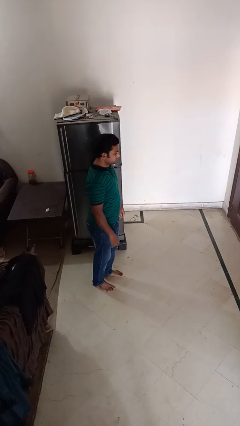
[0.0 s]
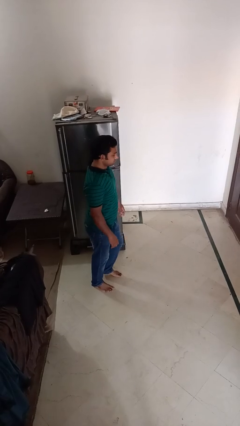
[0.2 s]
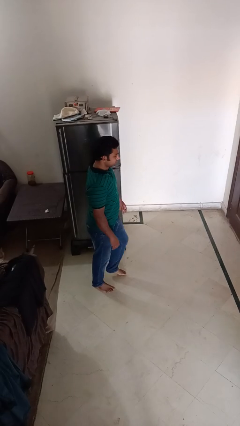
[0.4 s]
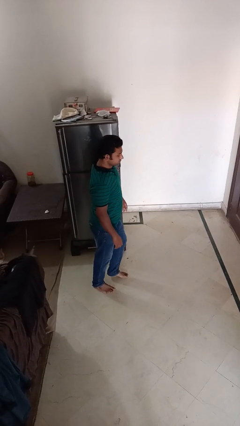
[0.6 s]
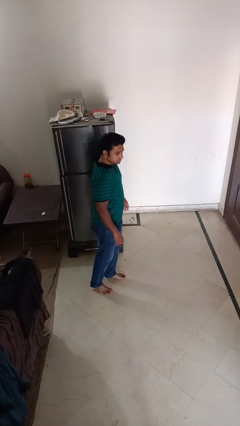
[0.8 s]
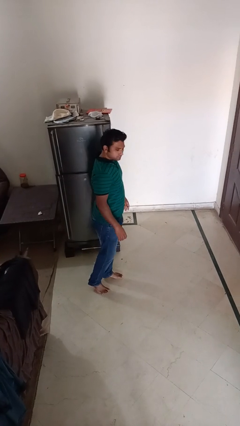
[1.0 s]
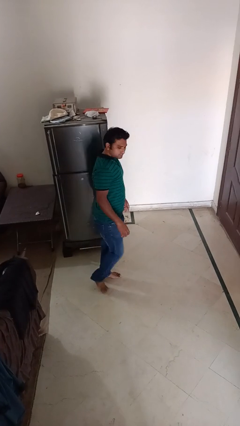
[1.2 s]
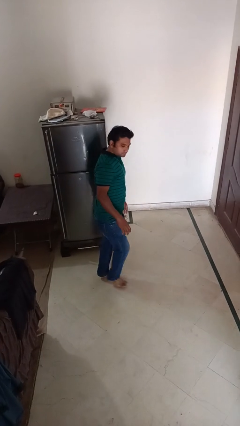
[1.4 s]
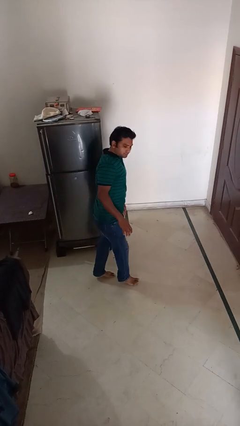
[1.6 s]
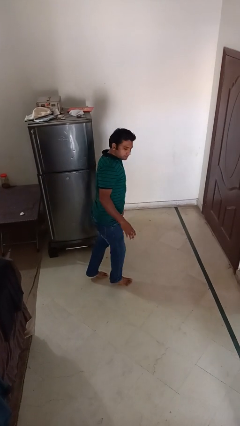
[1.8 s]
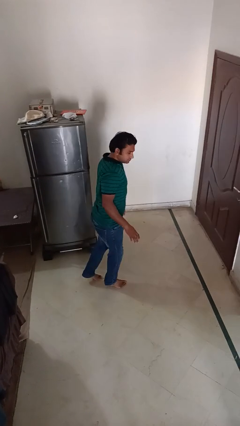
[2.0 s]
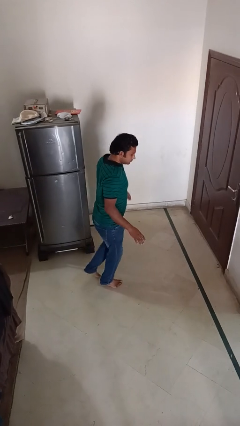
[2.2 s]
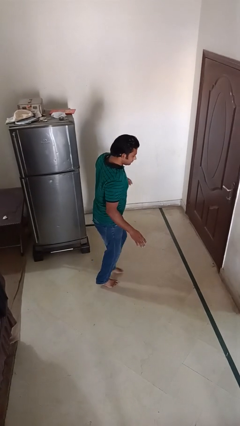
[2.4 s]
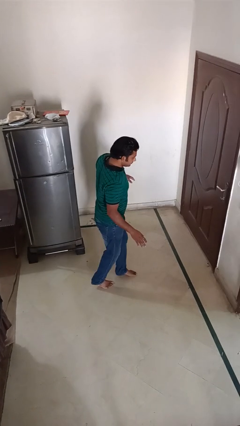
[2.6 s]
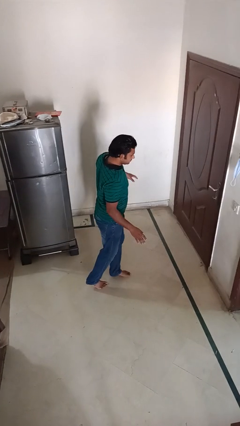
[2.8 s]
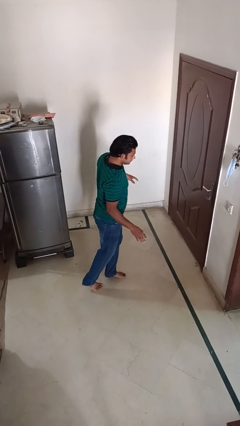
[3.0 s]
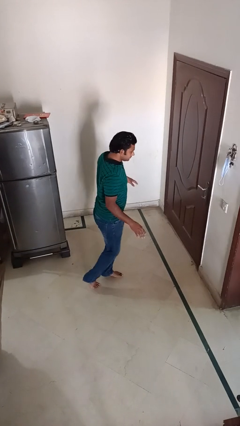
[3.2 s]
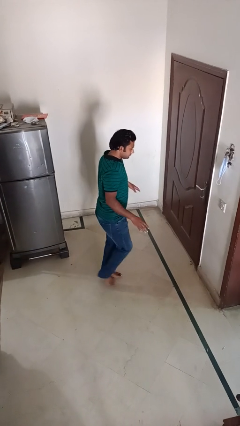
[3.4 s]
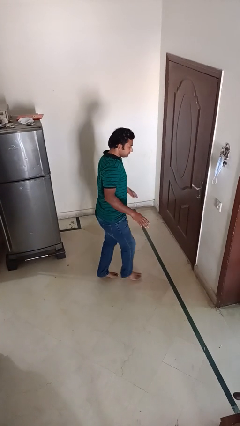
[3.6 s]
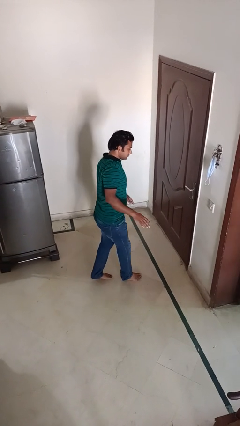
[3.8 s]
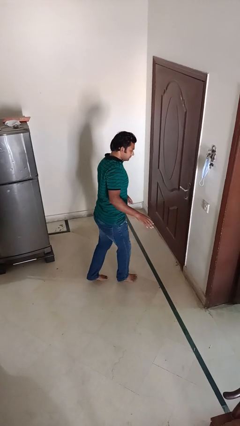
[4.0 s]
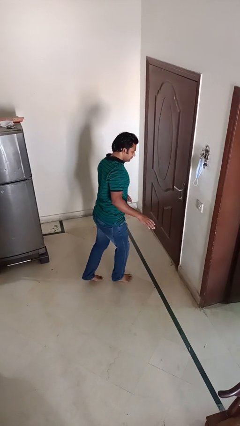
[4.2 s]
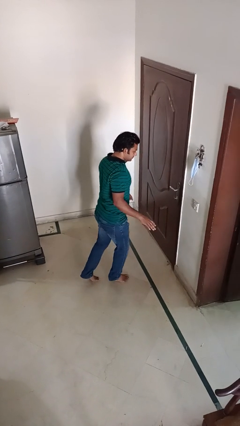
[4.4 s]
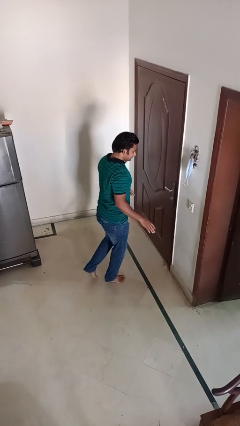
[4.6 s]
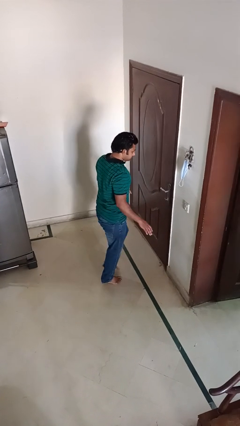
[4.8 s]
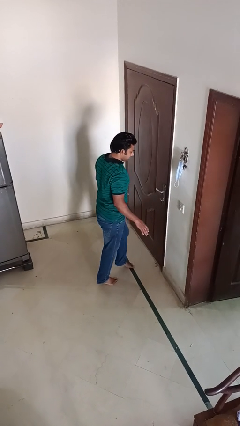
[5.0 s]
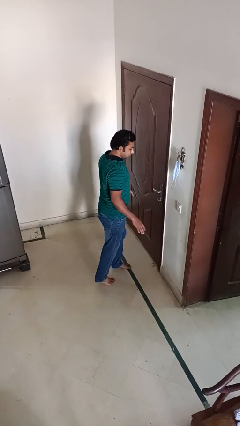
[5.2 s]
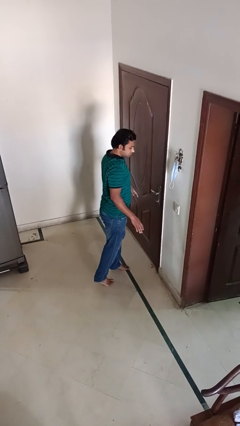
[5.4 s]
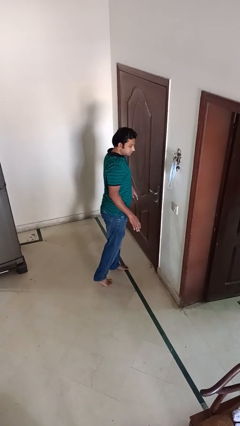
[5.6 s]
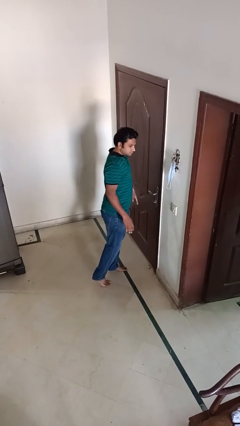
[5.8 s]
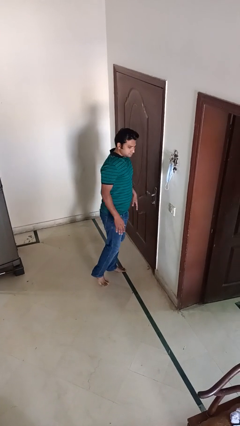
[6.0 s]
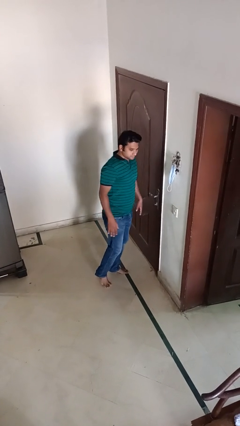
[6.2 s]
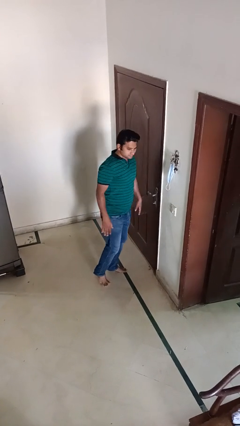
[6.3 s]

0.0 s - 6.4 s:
person walks tiptoe

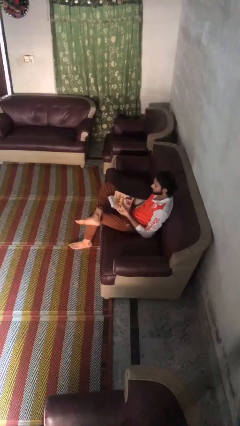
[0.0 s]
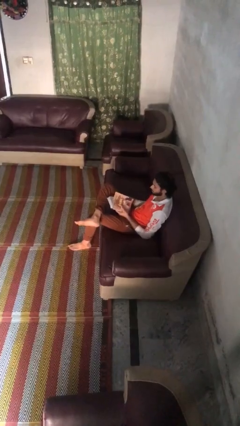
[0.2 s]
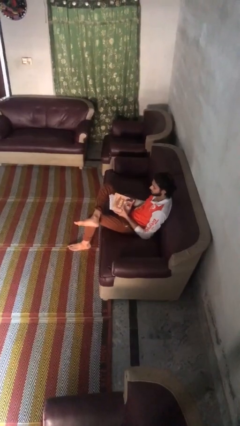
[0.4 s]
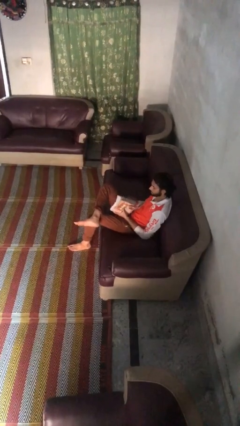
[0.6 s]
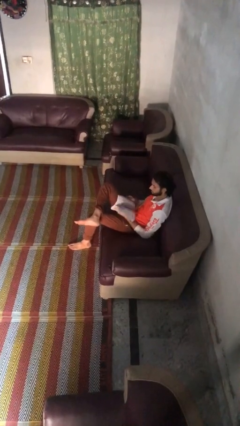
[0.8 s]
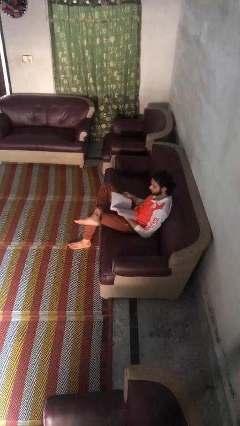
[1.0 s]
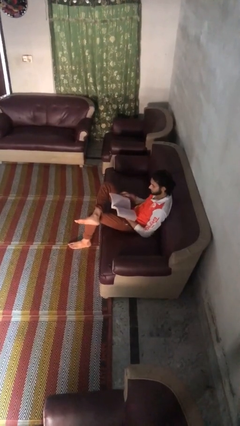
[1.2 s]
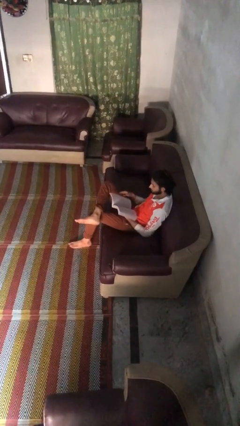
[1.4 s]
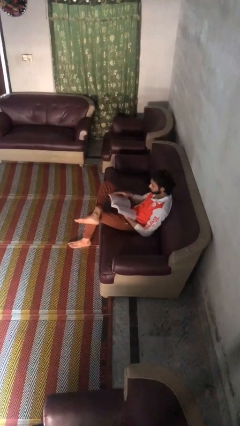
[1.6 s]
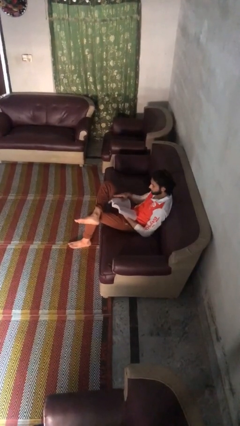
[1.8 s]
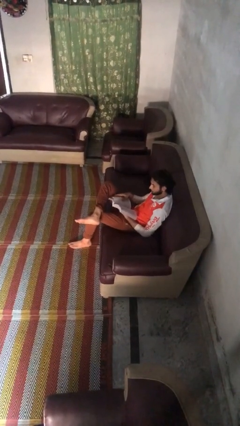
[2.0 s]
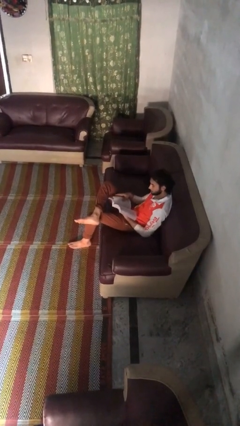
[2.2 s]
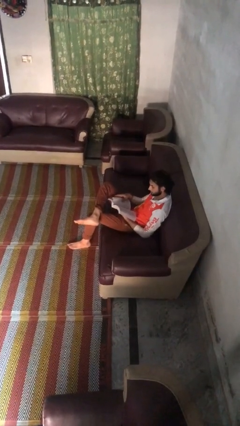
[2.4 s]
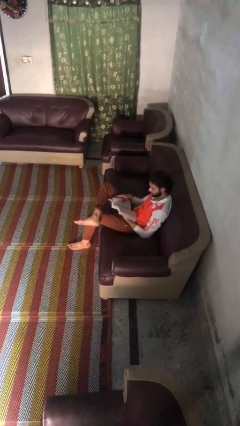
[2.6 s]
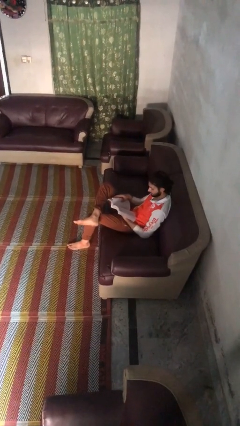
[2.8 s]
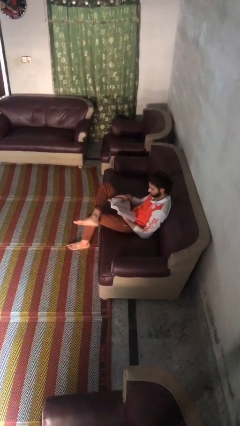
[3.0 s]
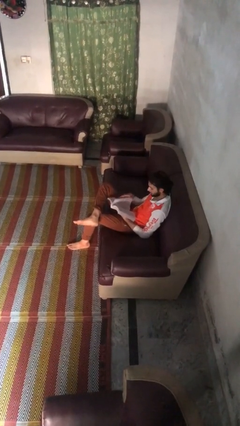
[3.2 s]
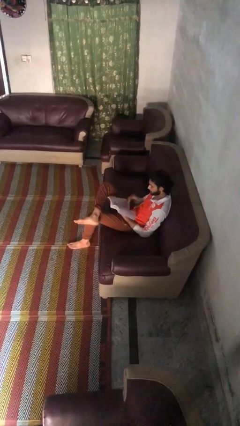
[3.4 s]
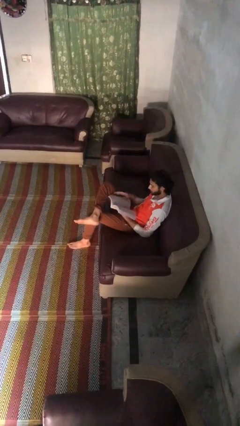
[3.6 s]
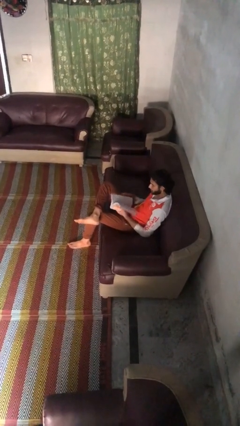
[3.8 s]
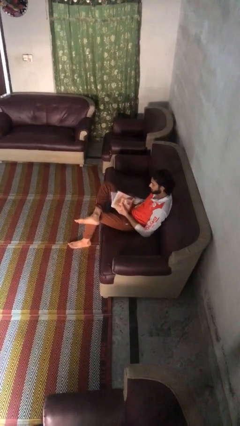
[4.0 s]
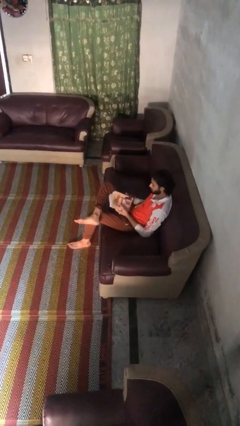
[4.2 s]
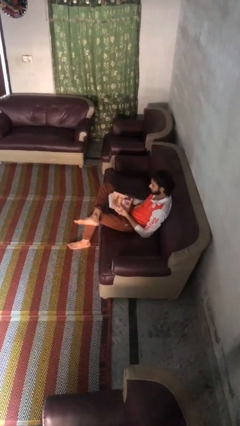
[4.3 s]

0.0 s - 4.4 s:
person reads book

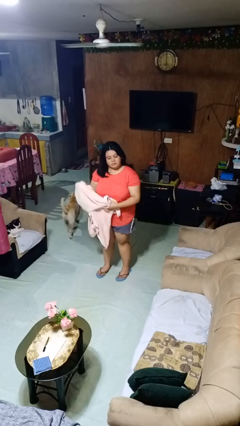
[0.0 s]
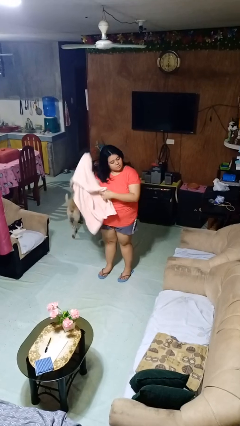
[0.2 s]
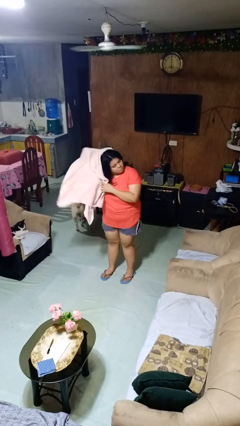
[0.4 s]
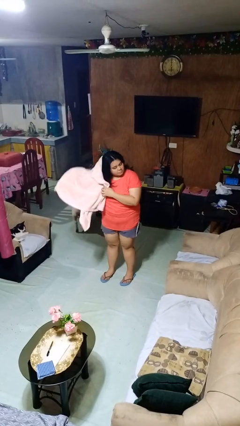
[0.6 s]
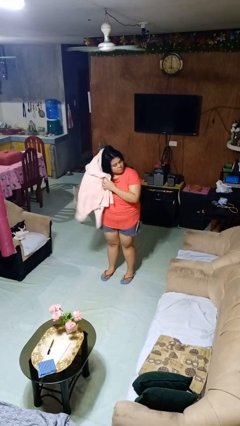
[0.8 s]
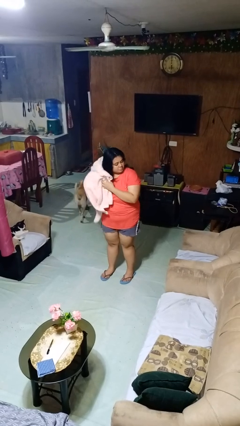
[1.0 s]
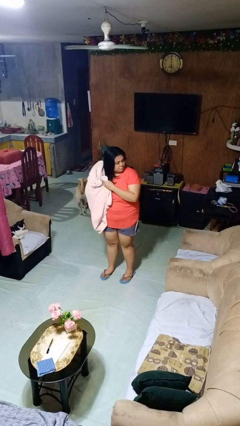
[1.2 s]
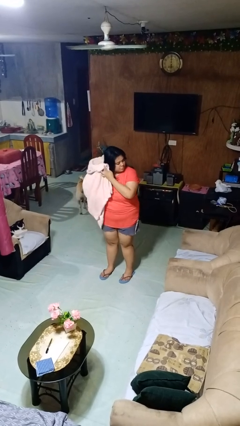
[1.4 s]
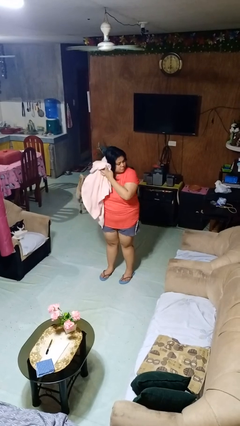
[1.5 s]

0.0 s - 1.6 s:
person dries hair with towel

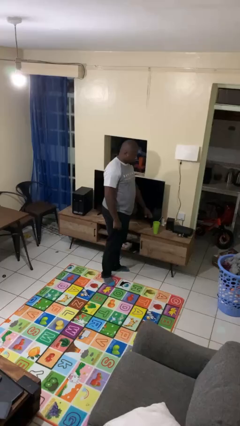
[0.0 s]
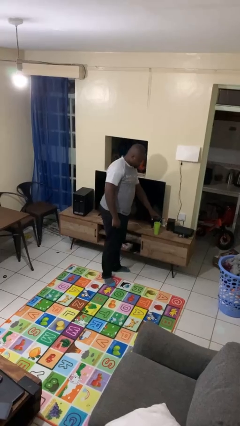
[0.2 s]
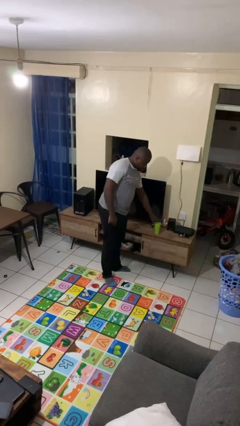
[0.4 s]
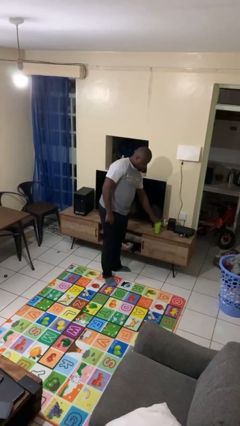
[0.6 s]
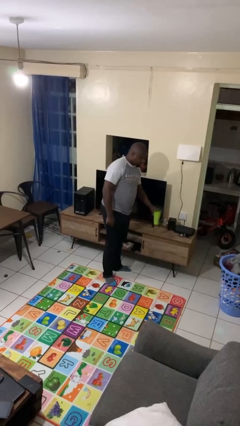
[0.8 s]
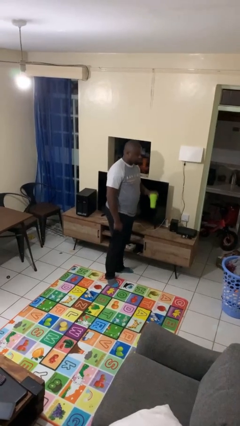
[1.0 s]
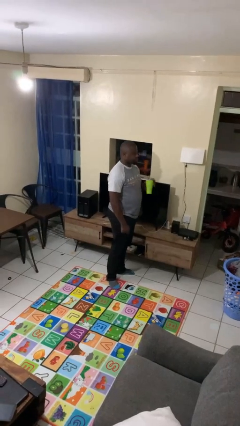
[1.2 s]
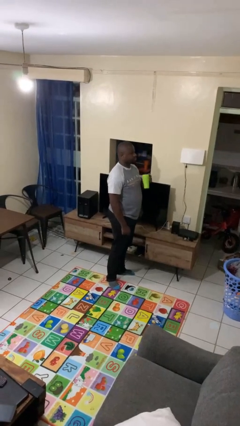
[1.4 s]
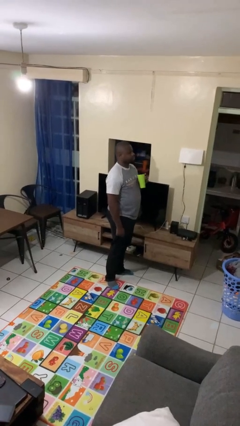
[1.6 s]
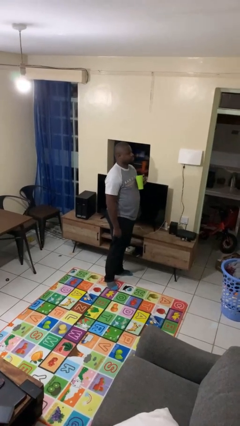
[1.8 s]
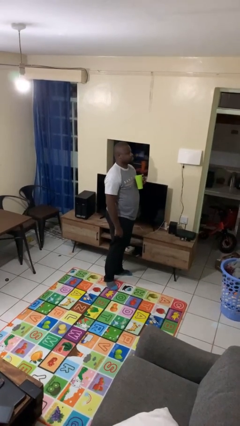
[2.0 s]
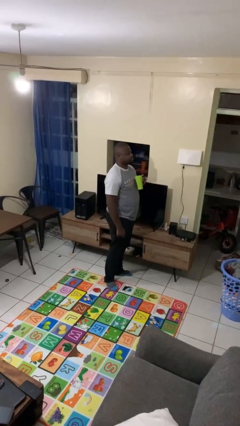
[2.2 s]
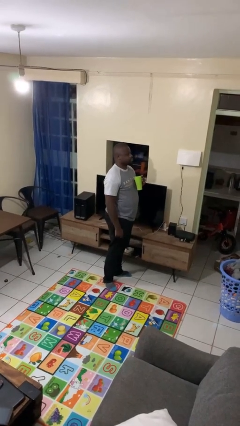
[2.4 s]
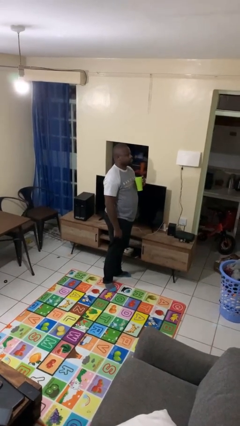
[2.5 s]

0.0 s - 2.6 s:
person picks up object from countertop

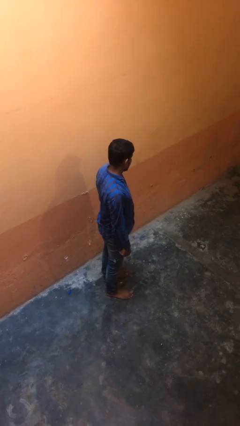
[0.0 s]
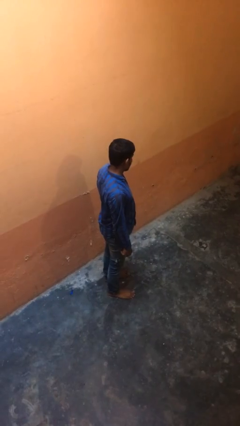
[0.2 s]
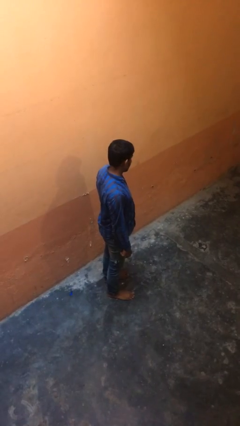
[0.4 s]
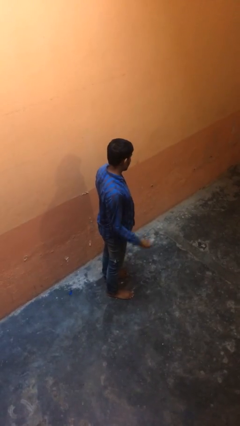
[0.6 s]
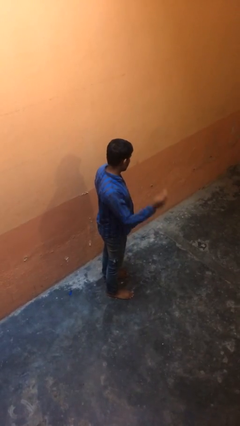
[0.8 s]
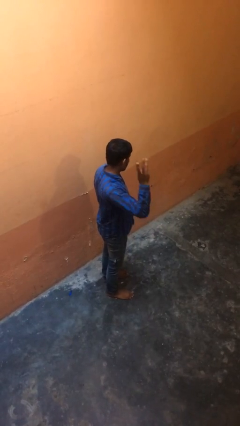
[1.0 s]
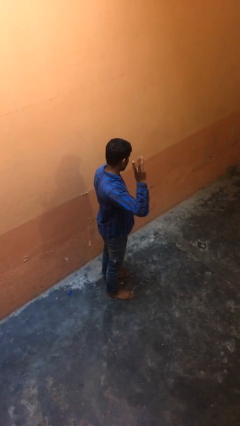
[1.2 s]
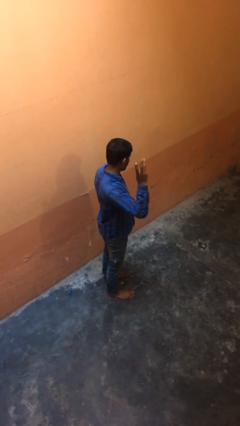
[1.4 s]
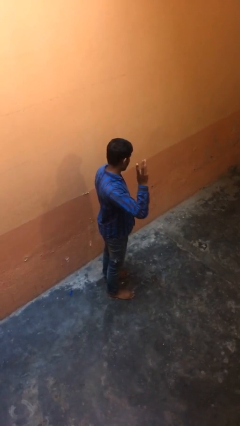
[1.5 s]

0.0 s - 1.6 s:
person gestures number three

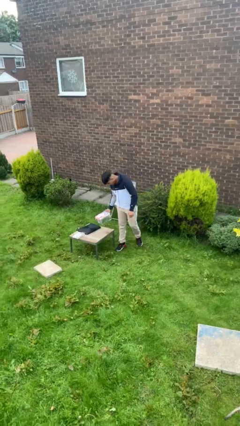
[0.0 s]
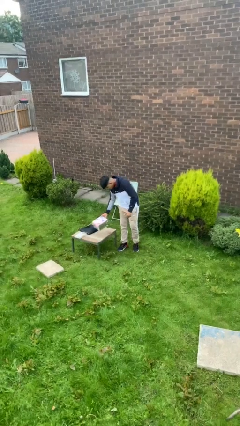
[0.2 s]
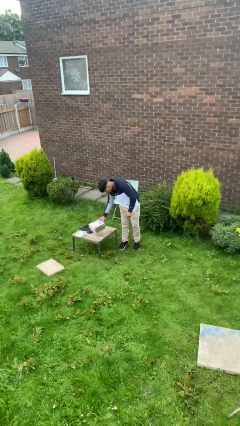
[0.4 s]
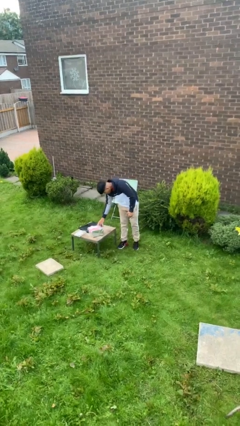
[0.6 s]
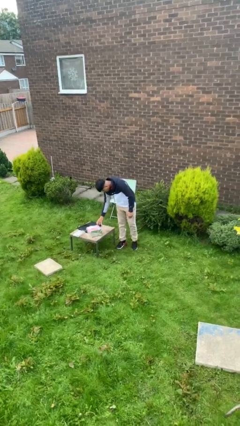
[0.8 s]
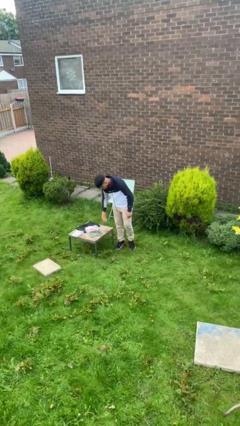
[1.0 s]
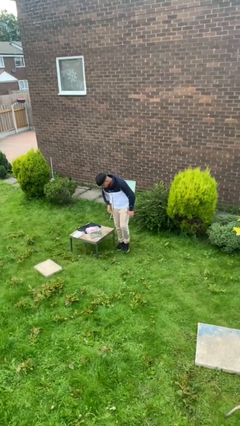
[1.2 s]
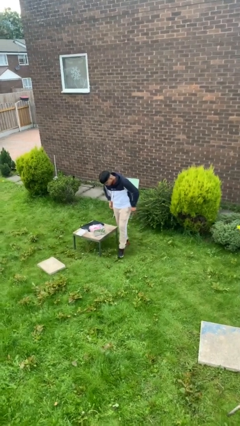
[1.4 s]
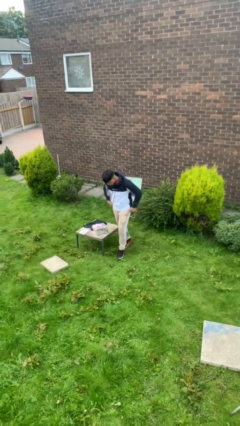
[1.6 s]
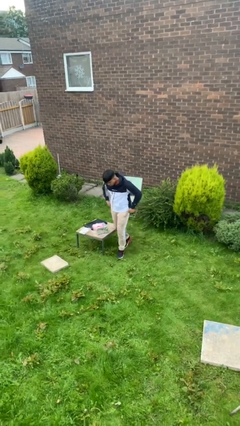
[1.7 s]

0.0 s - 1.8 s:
person puts down object on table
